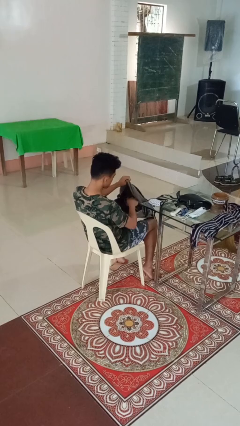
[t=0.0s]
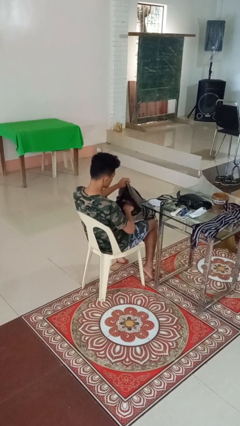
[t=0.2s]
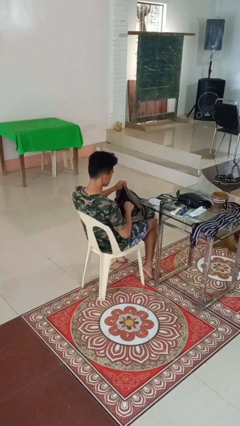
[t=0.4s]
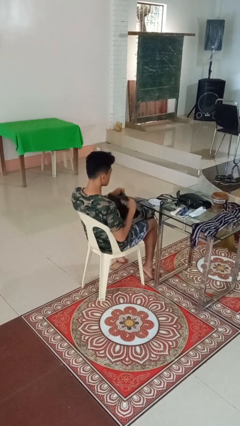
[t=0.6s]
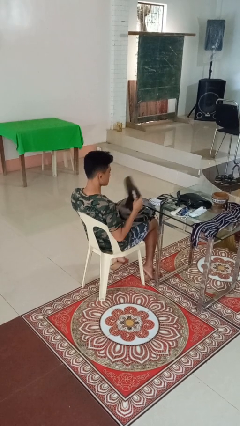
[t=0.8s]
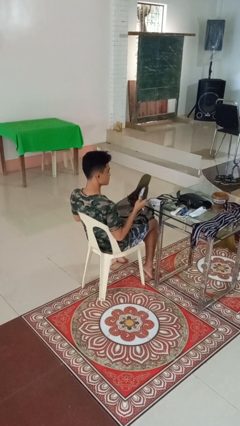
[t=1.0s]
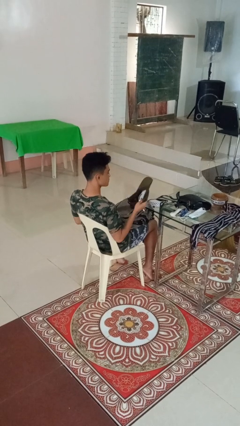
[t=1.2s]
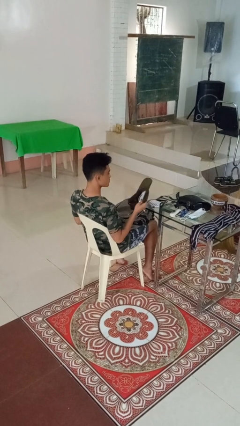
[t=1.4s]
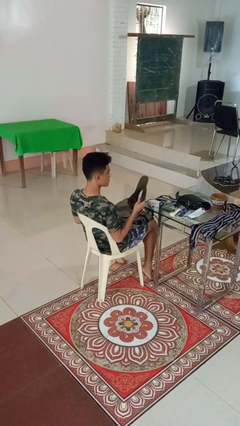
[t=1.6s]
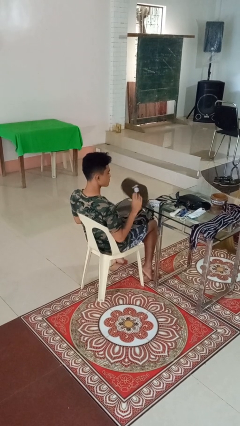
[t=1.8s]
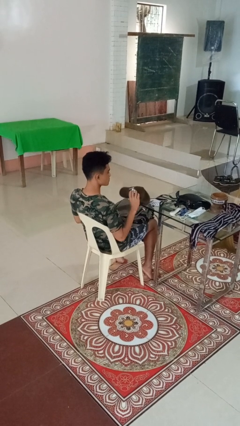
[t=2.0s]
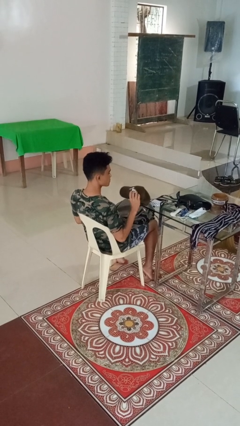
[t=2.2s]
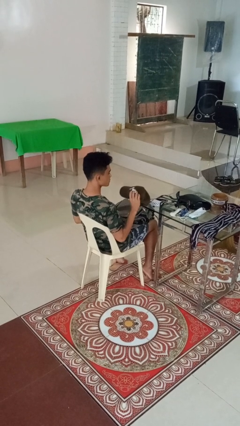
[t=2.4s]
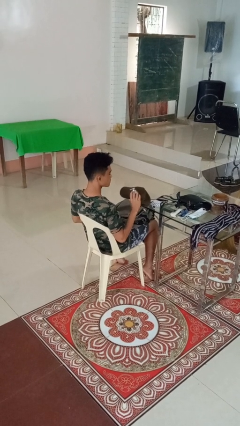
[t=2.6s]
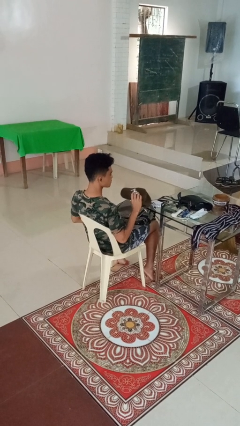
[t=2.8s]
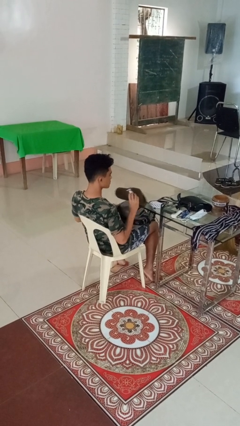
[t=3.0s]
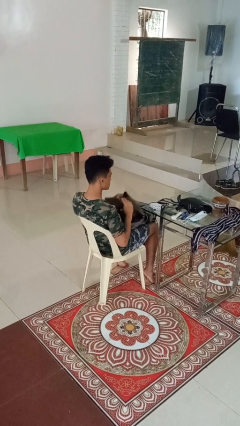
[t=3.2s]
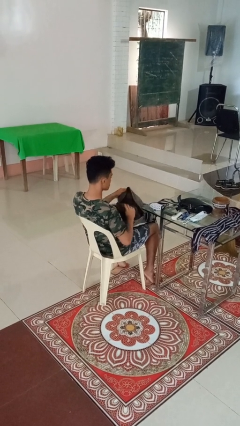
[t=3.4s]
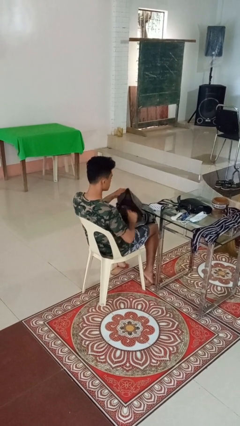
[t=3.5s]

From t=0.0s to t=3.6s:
person takes object from backpack

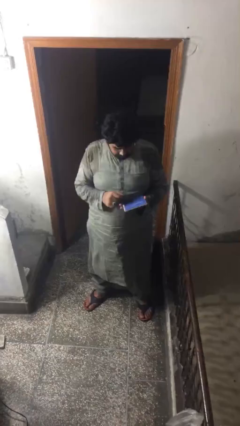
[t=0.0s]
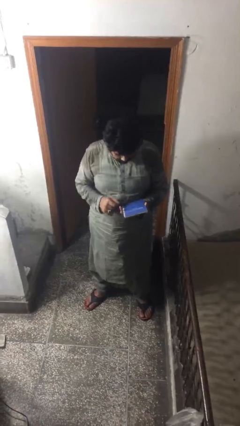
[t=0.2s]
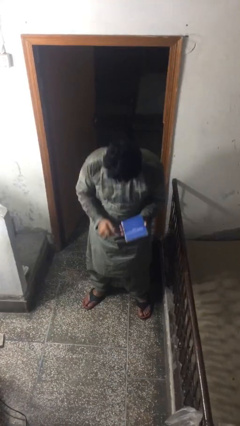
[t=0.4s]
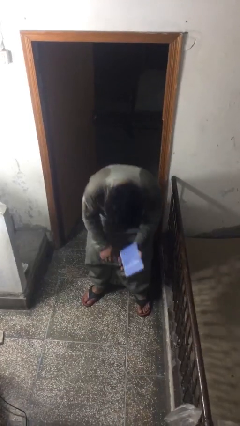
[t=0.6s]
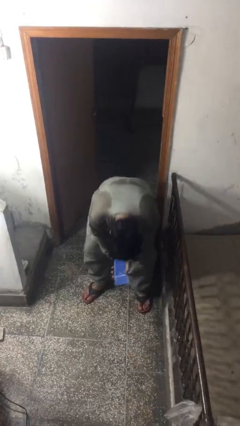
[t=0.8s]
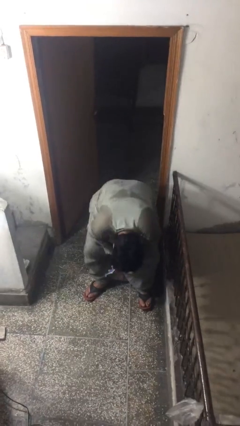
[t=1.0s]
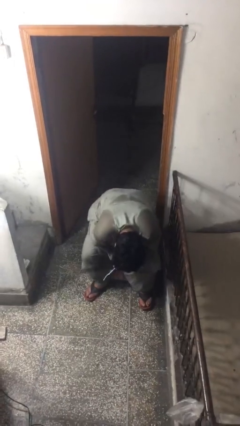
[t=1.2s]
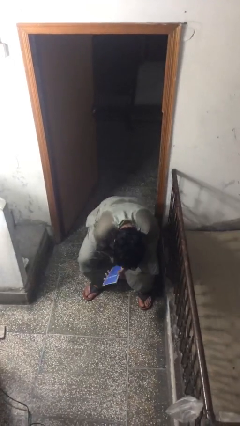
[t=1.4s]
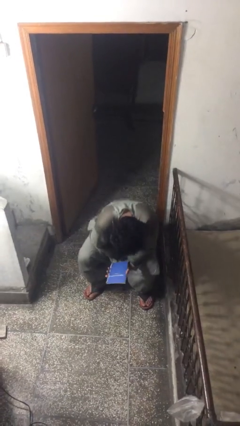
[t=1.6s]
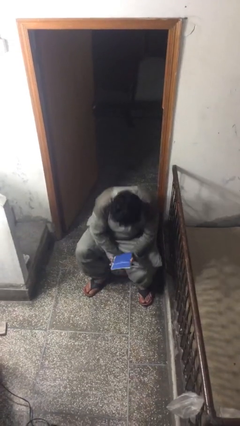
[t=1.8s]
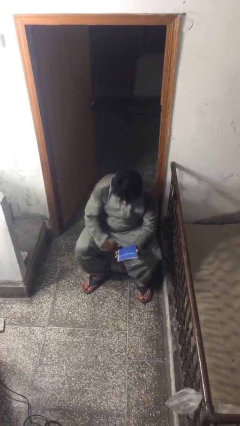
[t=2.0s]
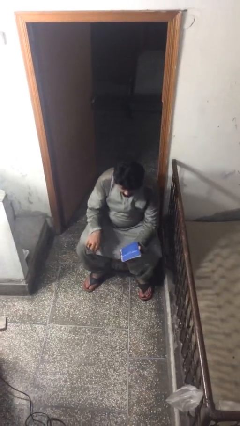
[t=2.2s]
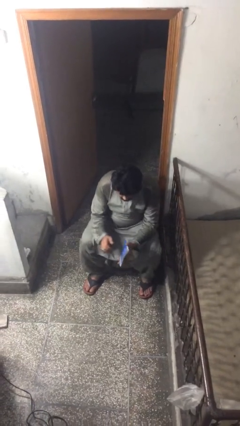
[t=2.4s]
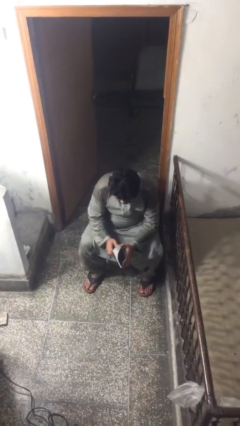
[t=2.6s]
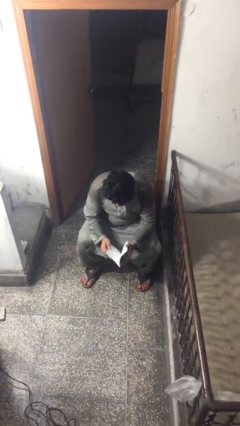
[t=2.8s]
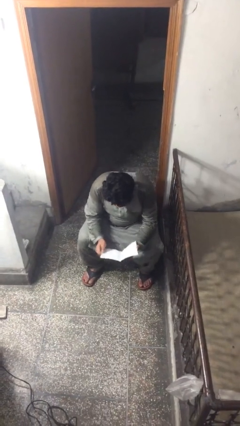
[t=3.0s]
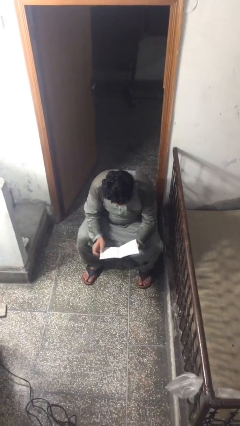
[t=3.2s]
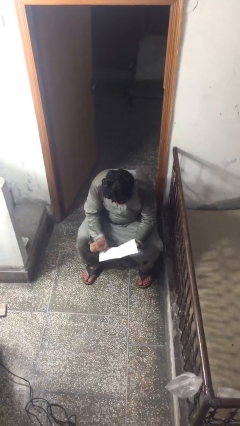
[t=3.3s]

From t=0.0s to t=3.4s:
person sits down

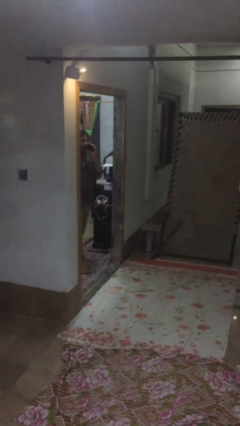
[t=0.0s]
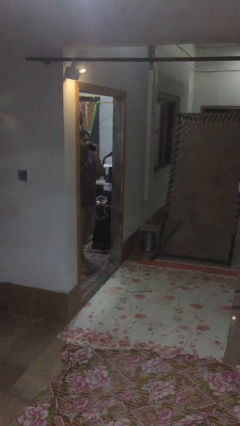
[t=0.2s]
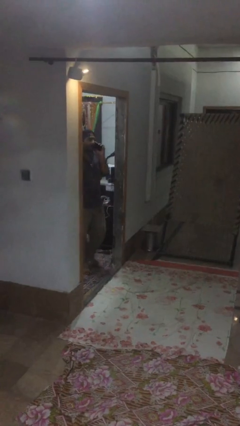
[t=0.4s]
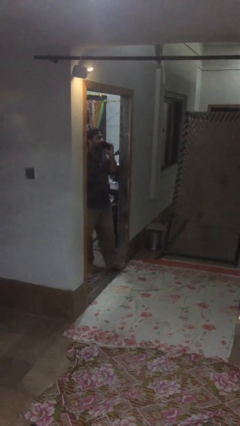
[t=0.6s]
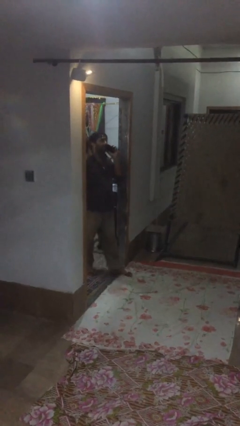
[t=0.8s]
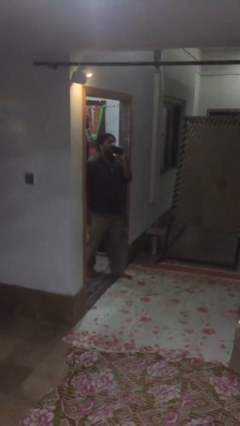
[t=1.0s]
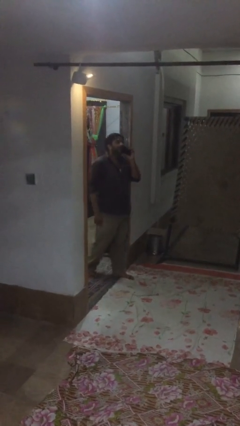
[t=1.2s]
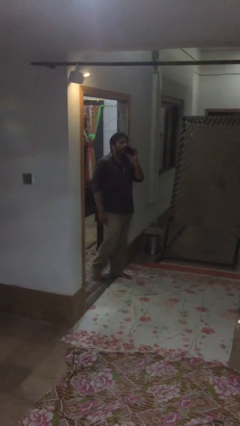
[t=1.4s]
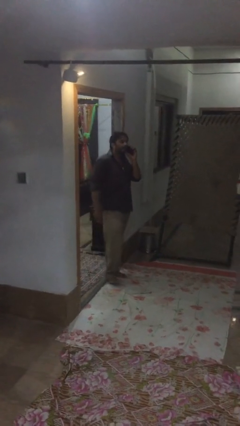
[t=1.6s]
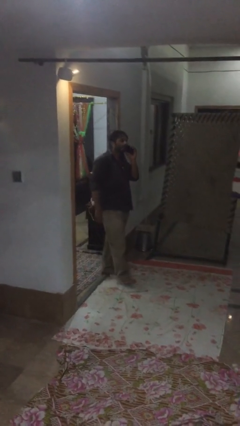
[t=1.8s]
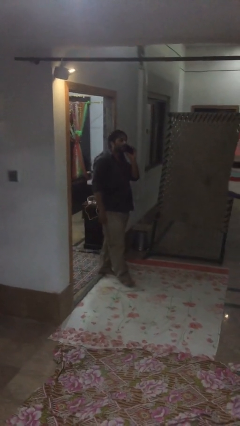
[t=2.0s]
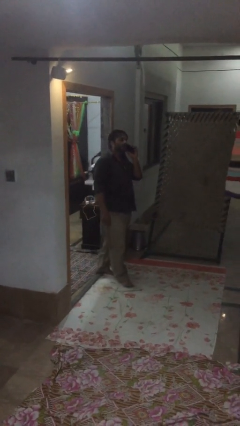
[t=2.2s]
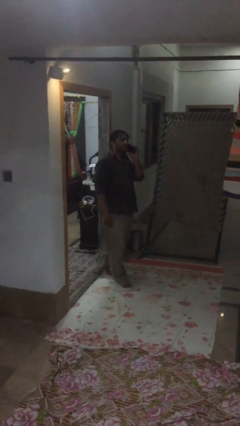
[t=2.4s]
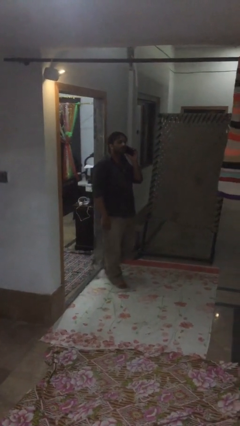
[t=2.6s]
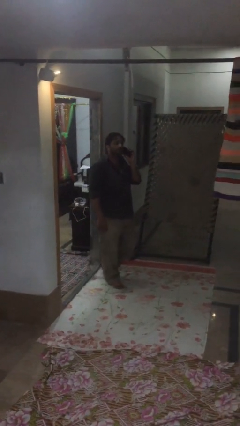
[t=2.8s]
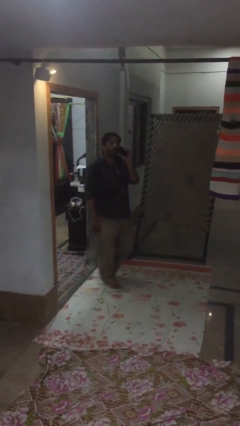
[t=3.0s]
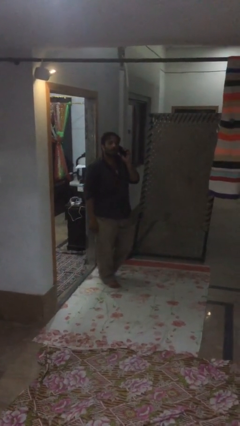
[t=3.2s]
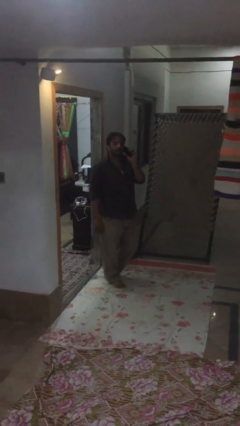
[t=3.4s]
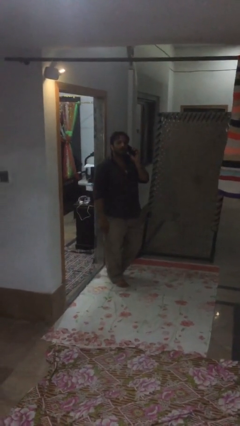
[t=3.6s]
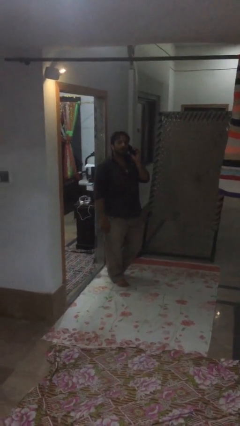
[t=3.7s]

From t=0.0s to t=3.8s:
person enters scene through structure

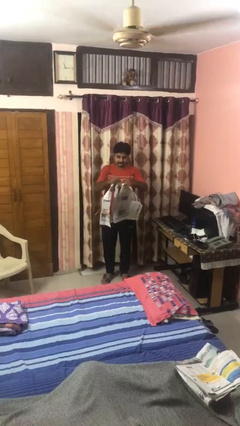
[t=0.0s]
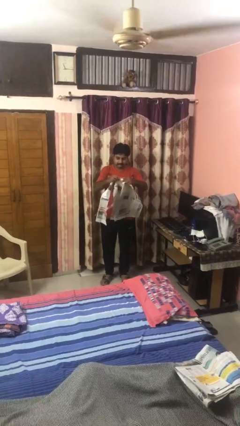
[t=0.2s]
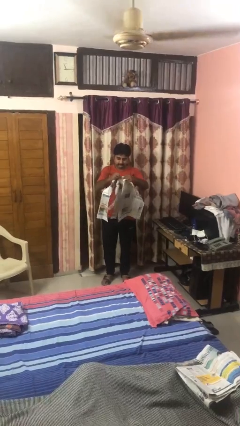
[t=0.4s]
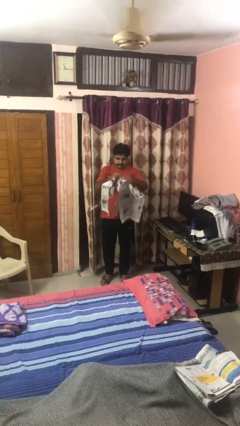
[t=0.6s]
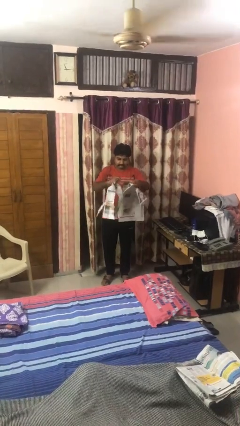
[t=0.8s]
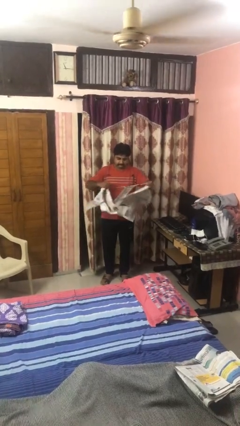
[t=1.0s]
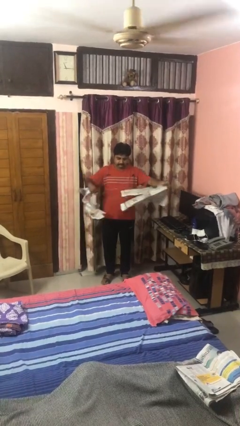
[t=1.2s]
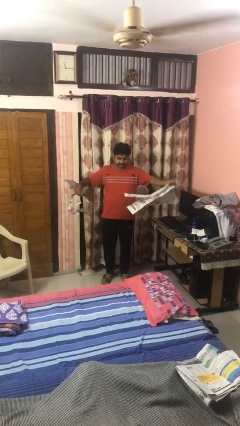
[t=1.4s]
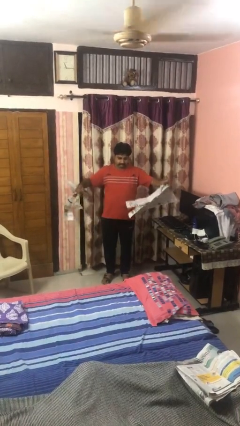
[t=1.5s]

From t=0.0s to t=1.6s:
person tears paper

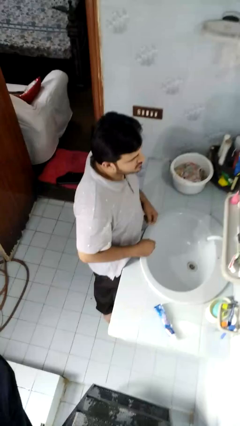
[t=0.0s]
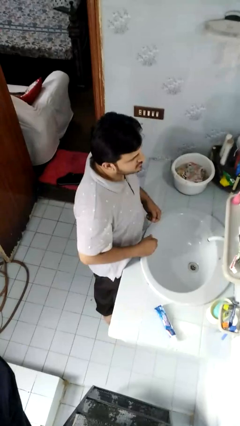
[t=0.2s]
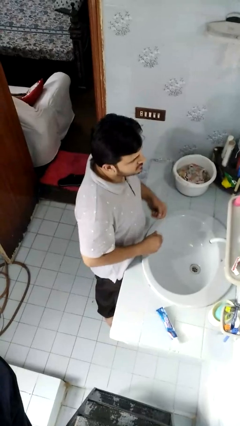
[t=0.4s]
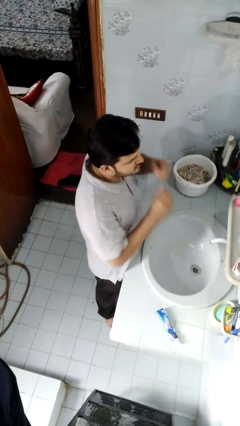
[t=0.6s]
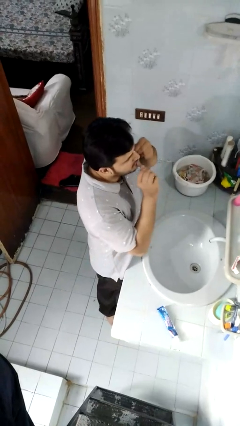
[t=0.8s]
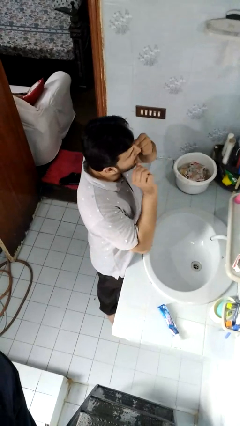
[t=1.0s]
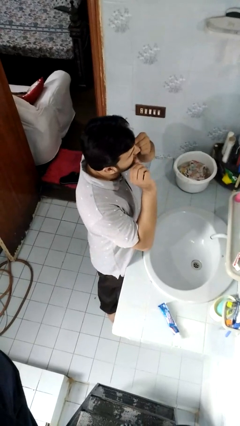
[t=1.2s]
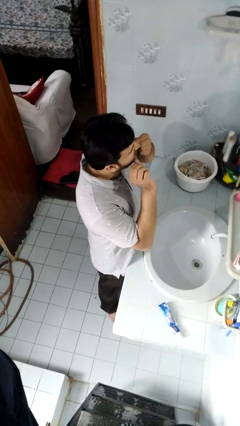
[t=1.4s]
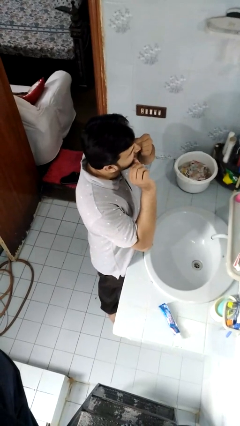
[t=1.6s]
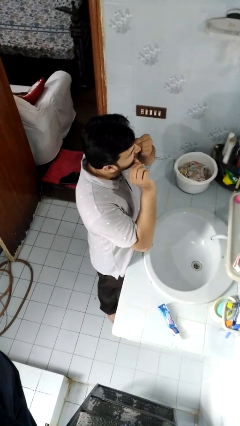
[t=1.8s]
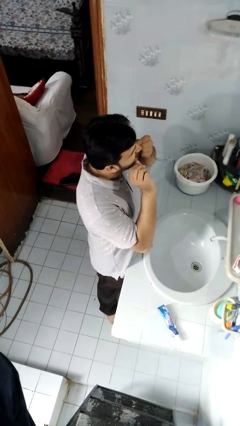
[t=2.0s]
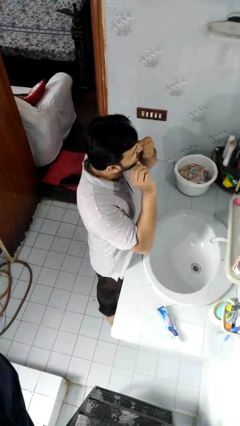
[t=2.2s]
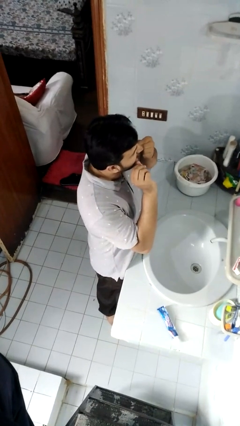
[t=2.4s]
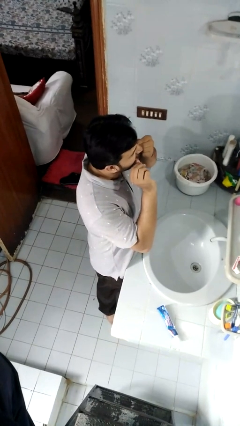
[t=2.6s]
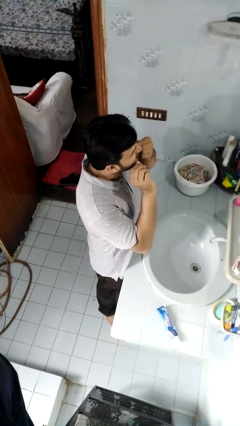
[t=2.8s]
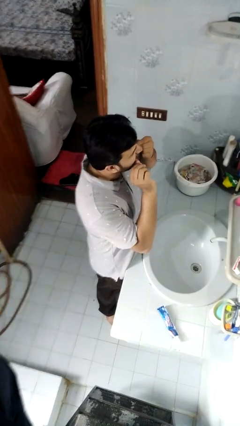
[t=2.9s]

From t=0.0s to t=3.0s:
person flosses

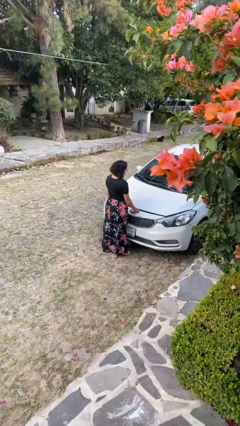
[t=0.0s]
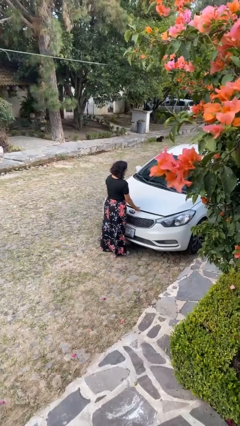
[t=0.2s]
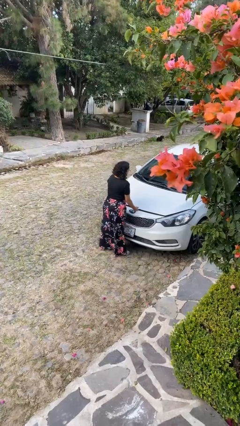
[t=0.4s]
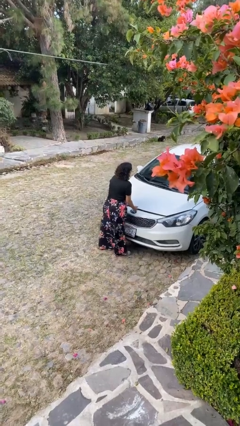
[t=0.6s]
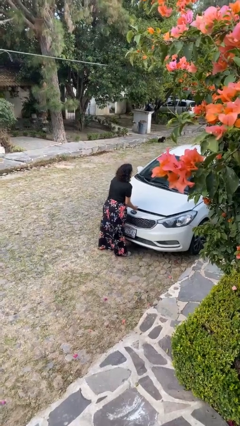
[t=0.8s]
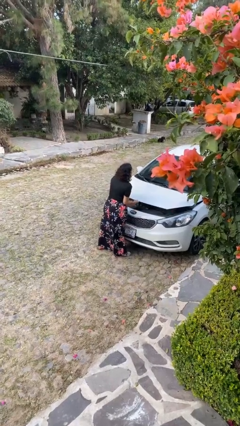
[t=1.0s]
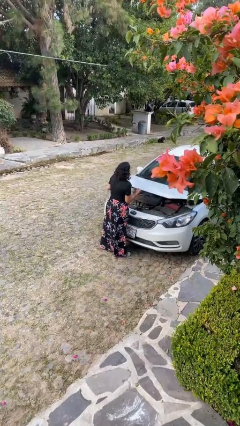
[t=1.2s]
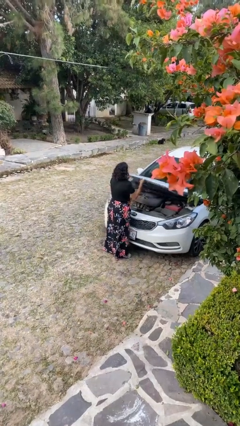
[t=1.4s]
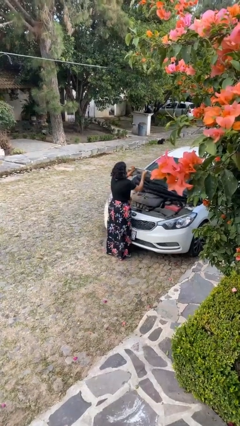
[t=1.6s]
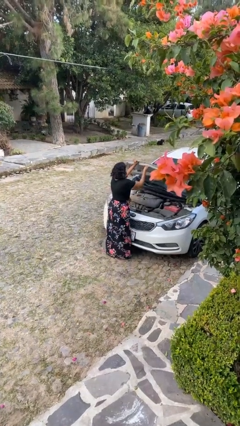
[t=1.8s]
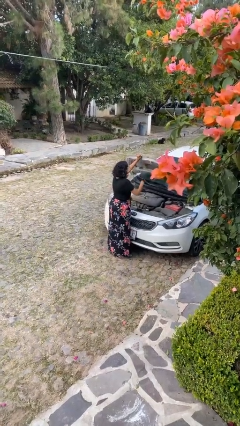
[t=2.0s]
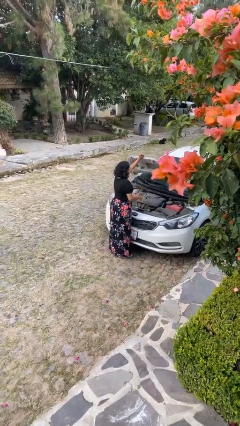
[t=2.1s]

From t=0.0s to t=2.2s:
person opens car hood
